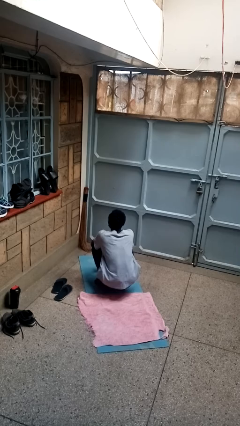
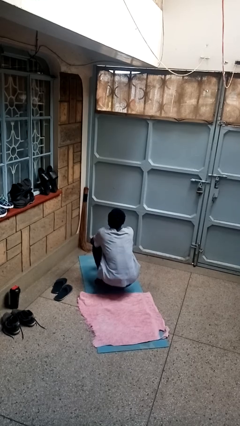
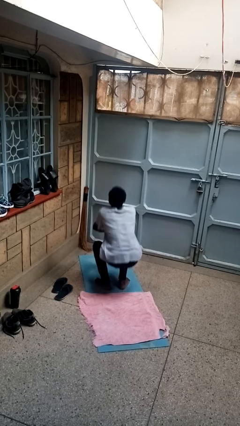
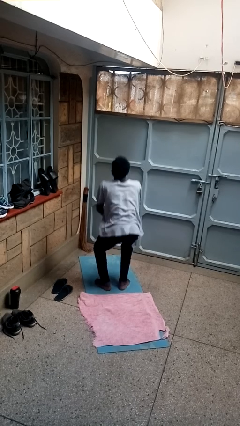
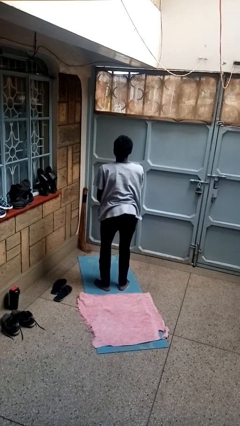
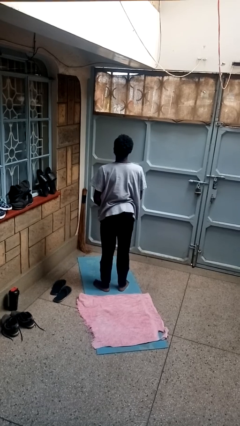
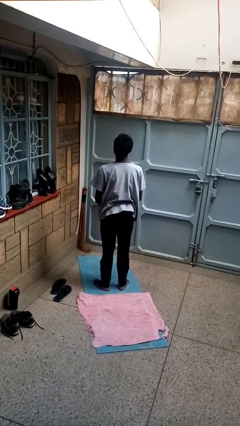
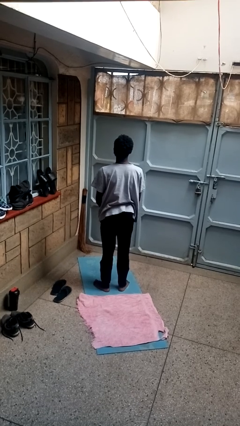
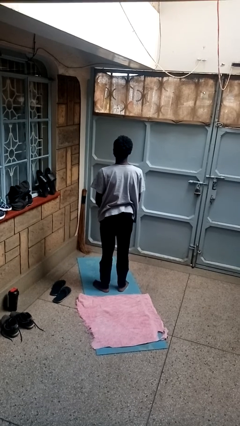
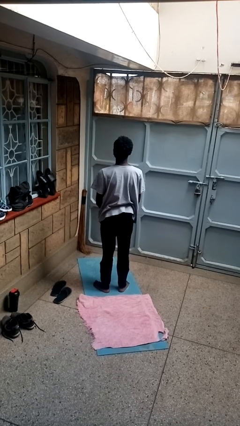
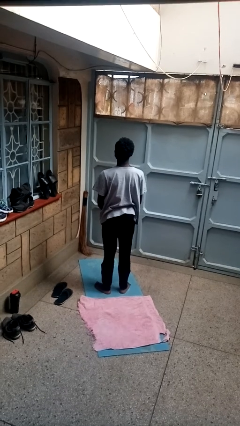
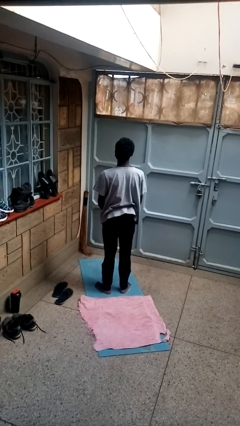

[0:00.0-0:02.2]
person stands up

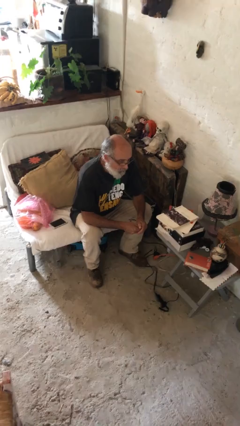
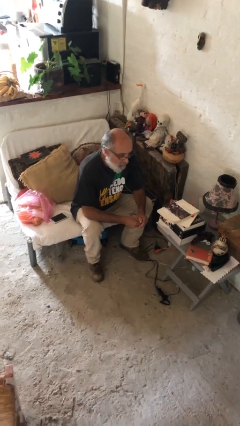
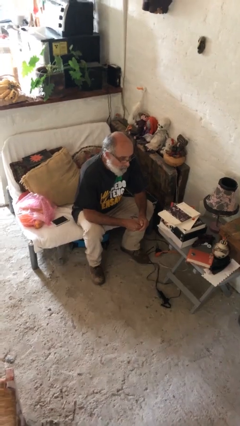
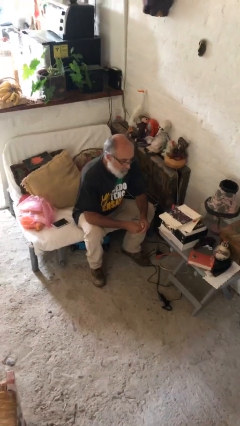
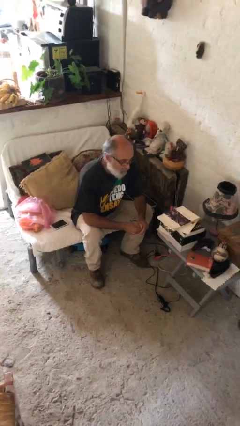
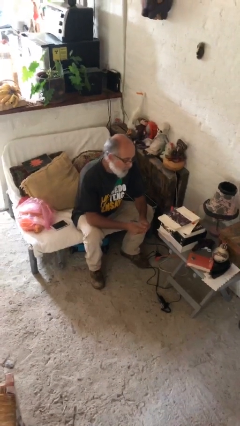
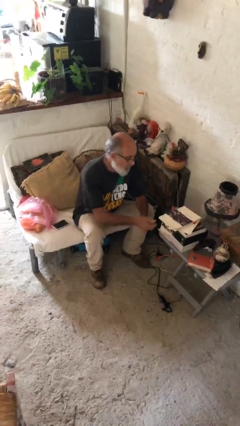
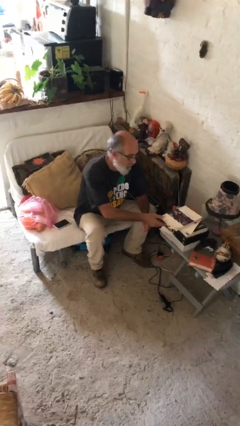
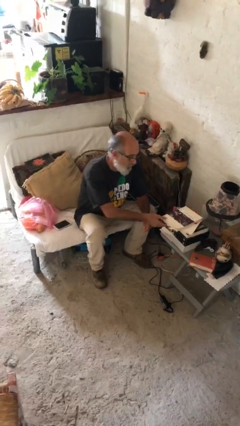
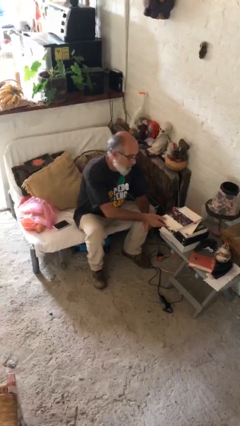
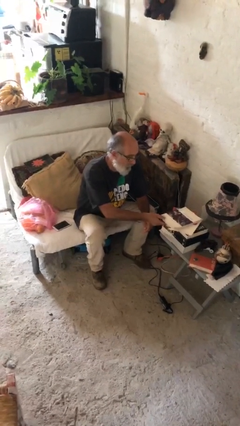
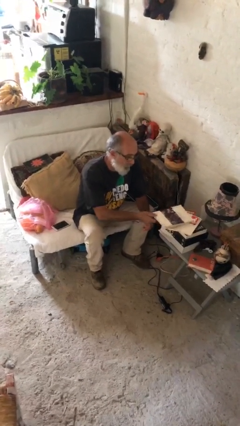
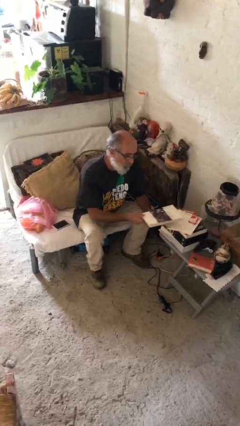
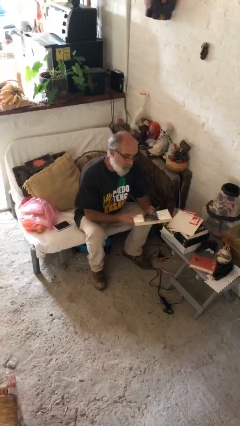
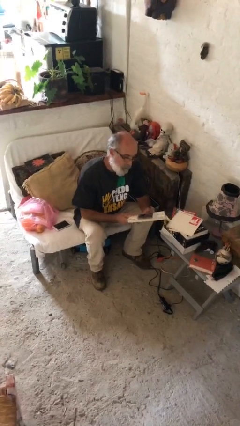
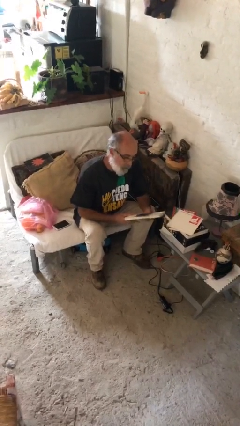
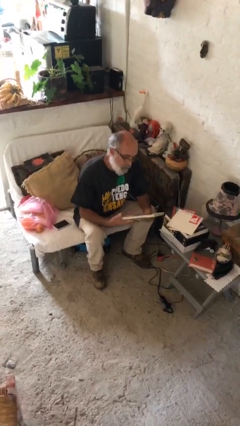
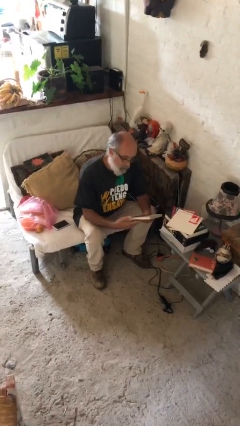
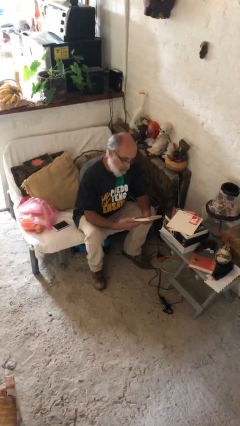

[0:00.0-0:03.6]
person picks up object from table

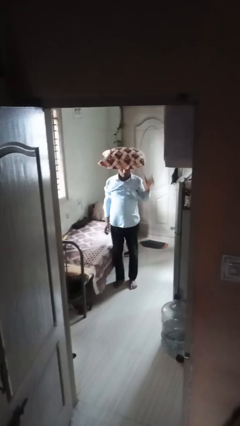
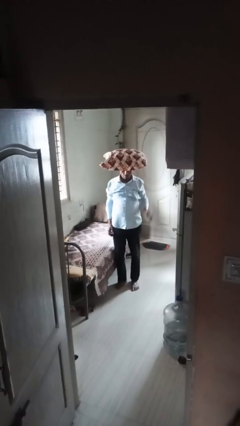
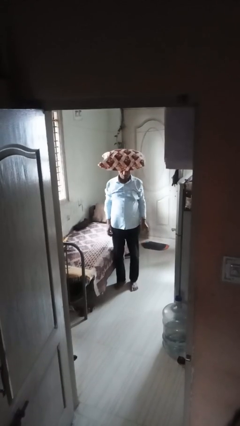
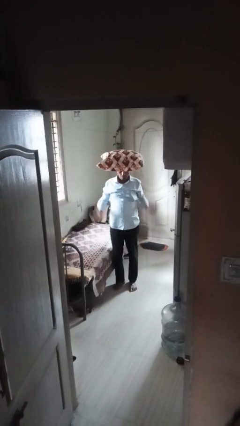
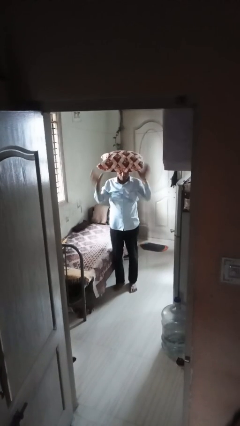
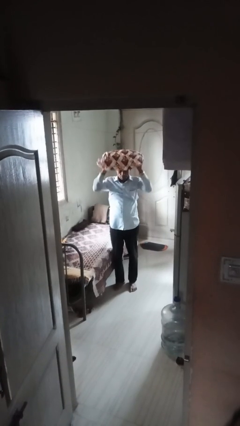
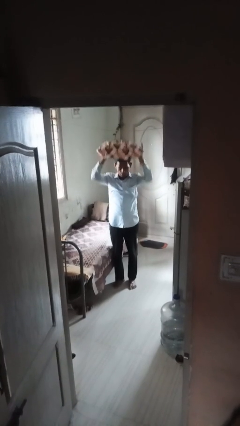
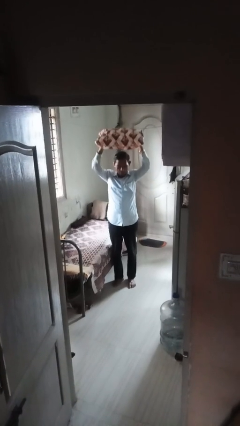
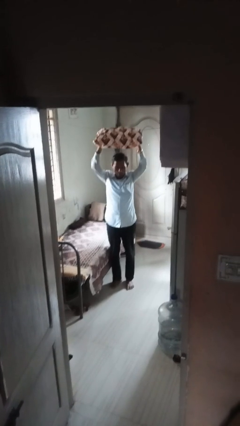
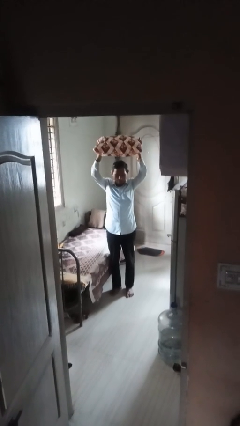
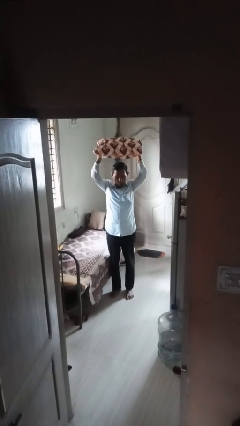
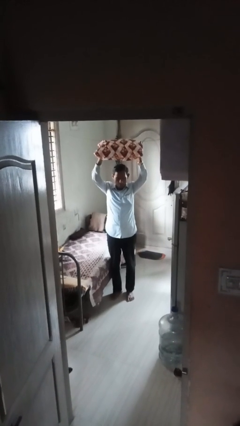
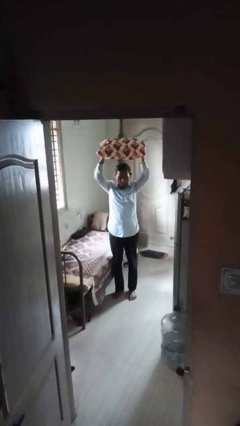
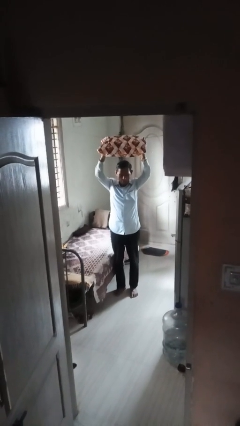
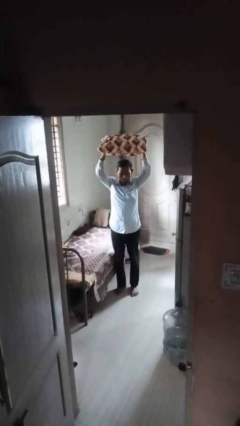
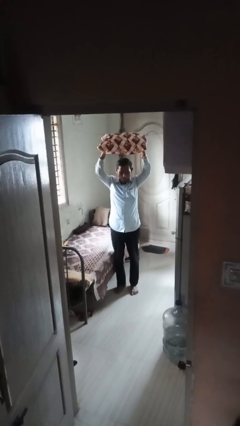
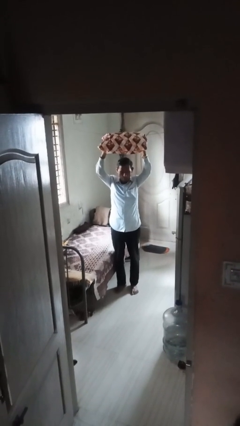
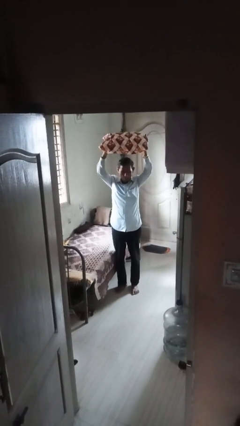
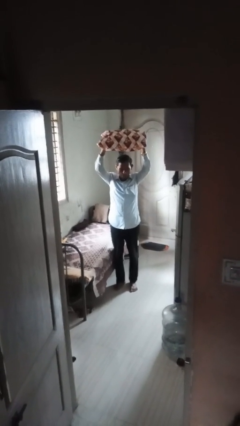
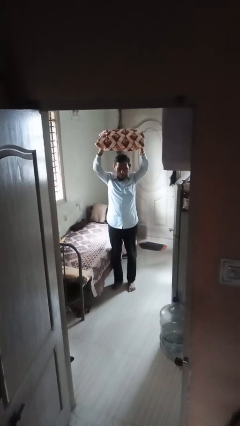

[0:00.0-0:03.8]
person holds object above head

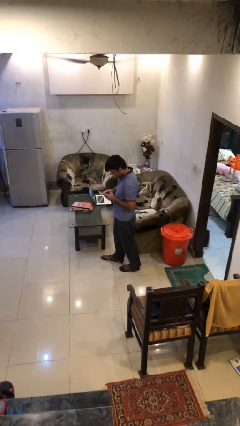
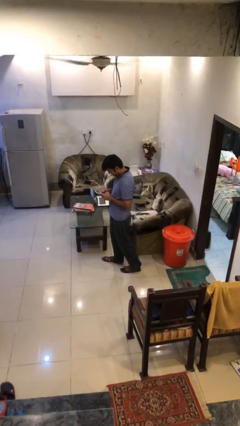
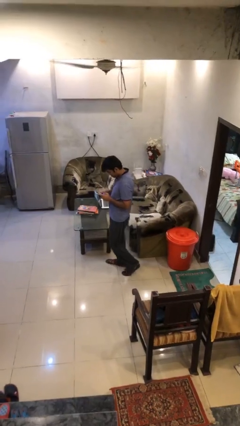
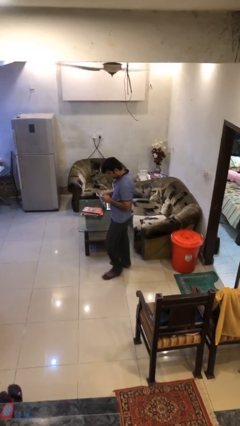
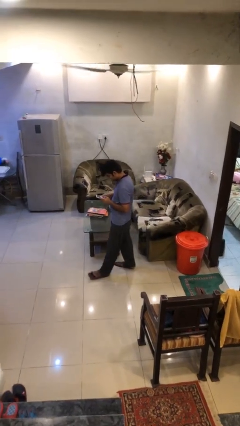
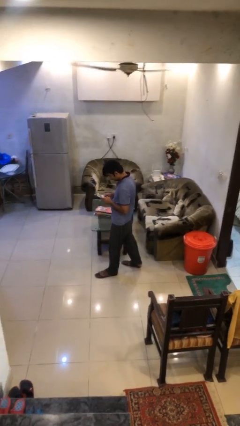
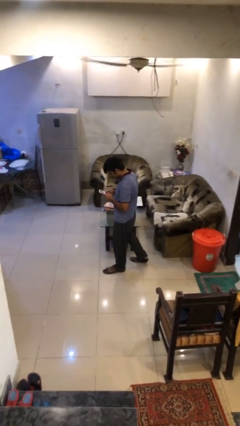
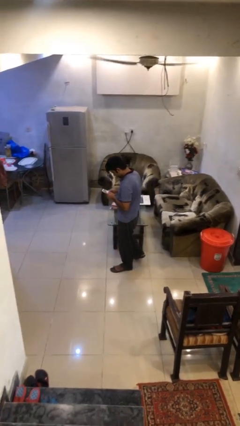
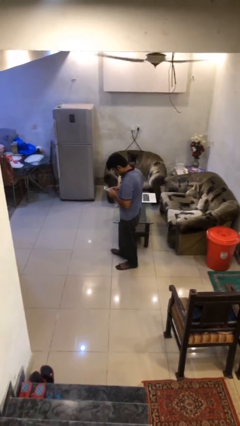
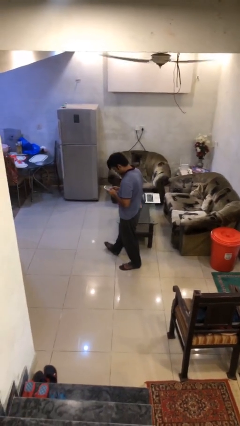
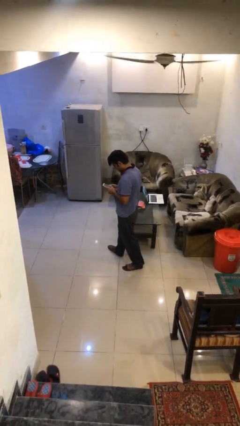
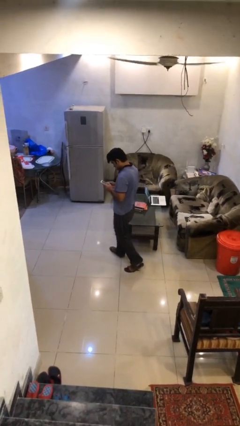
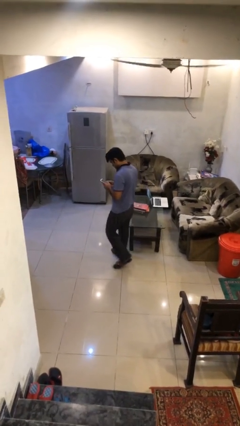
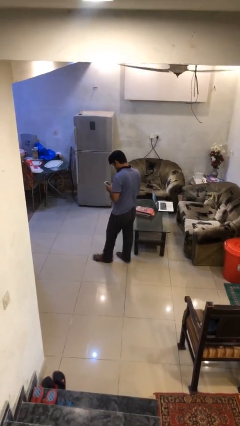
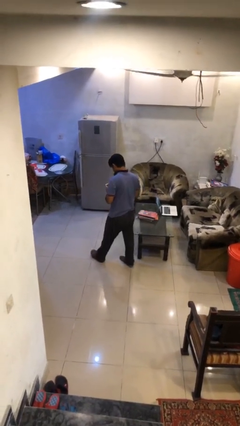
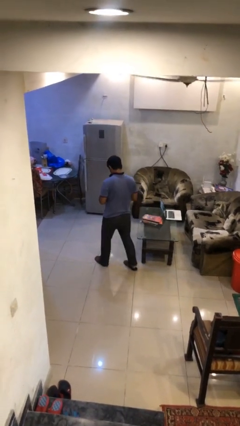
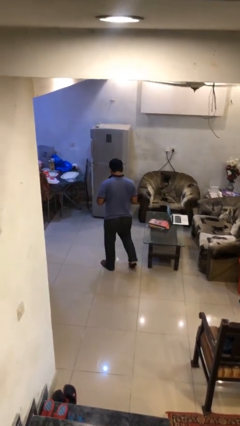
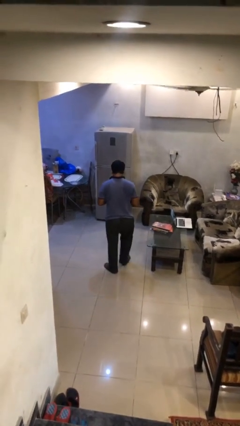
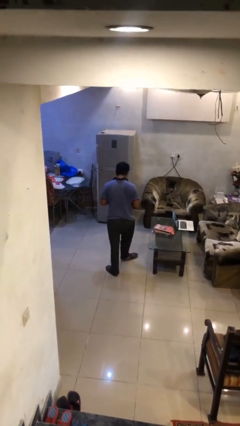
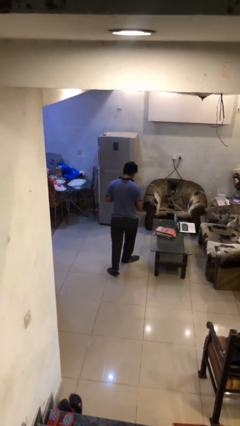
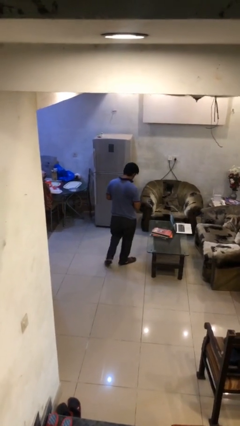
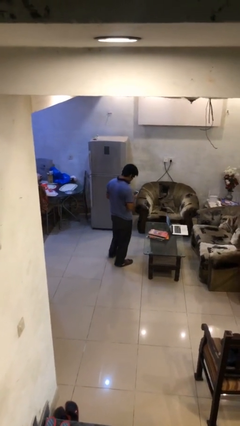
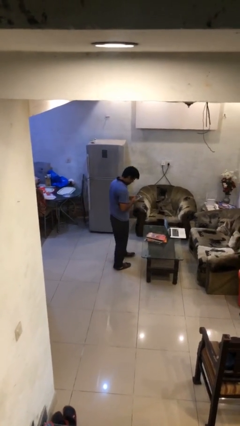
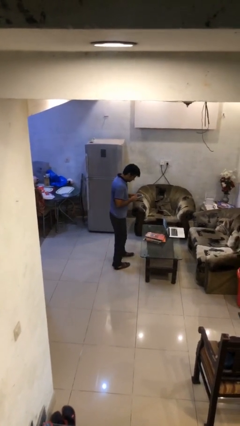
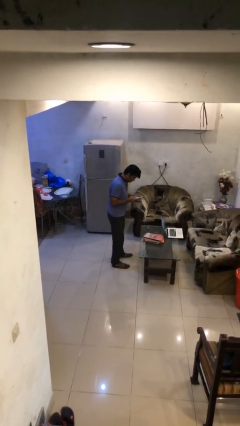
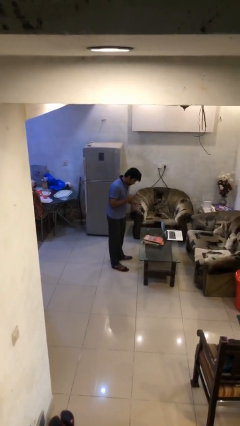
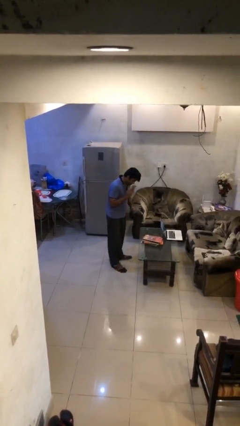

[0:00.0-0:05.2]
person texts on phone

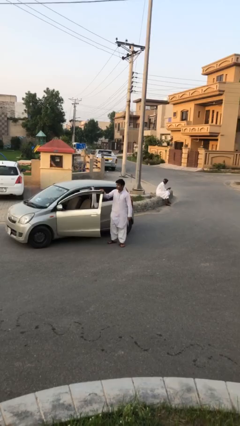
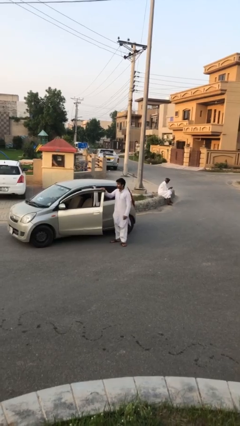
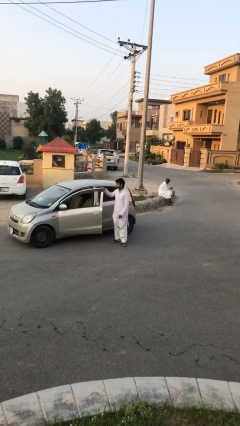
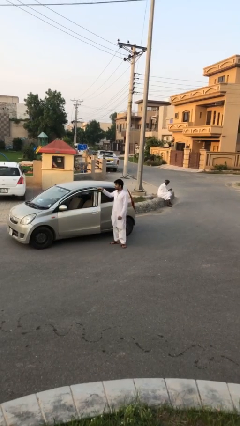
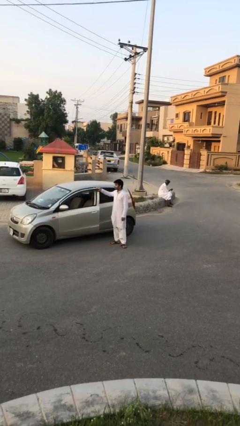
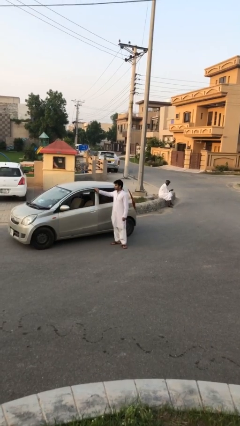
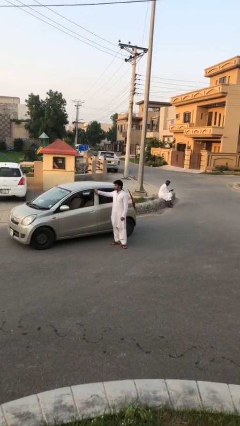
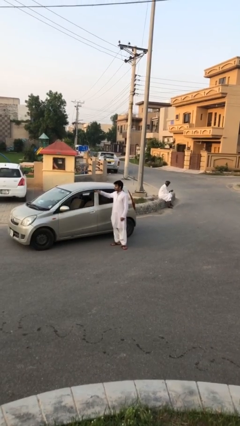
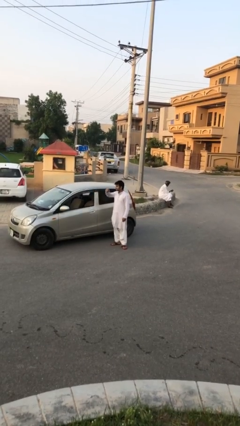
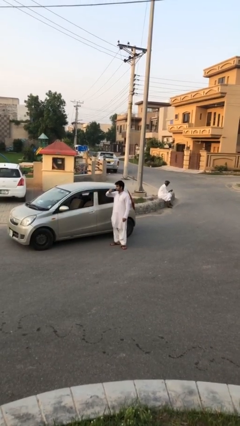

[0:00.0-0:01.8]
person closes car door

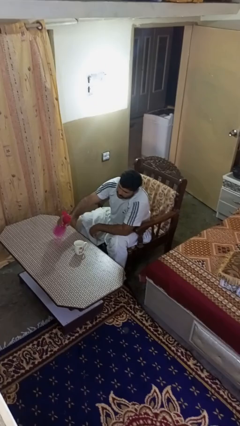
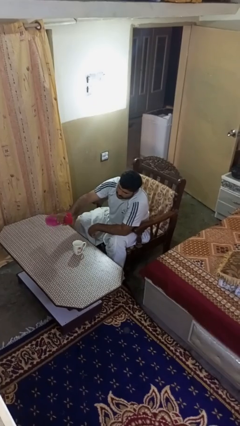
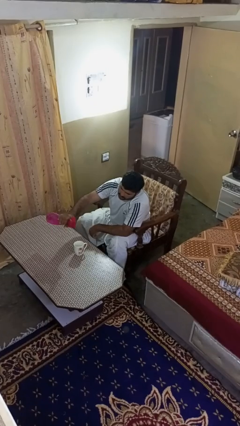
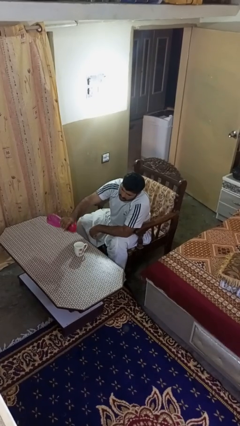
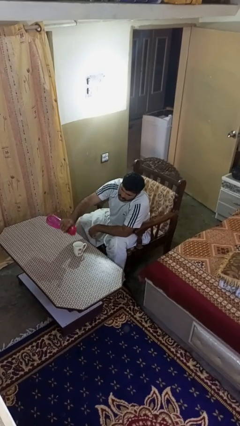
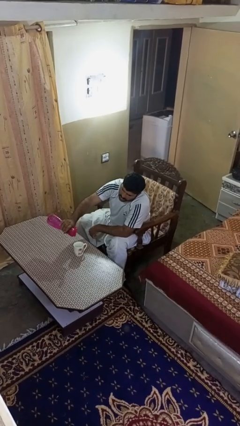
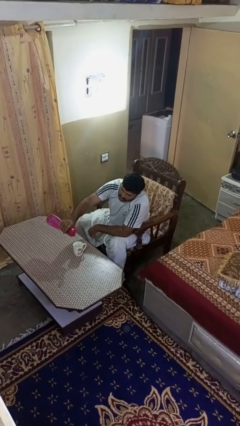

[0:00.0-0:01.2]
person pours liquid into cup
